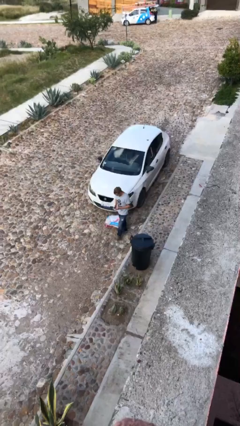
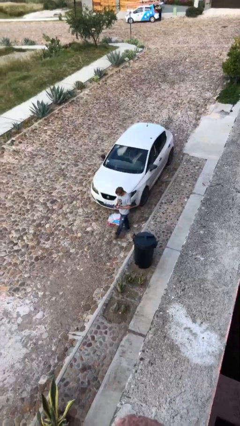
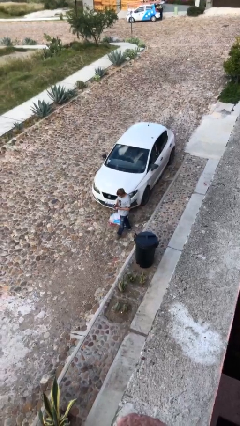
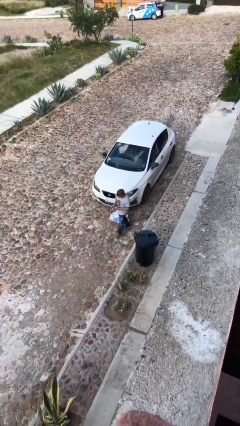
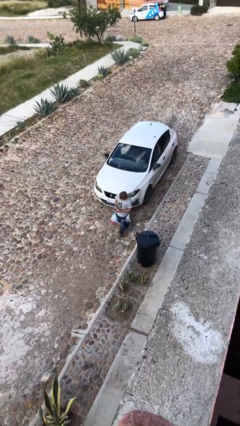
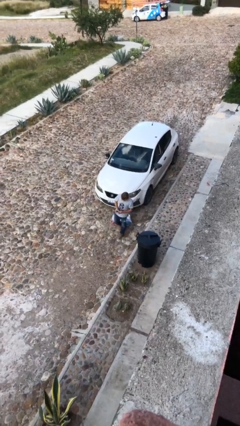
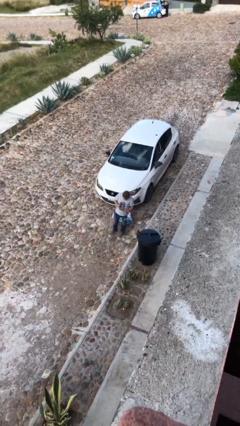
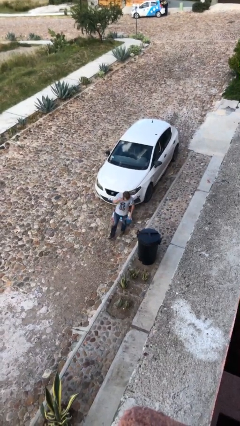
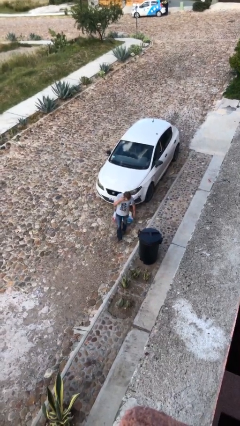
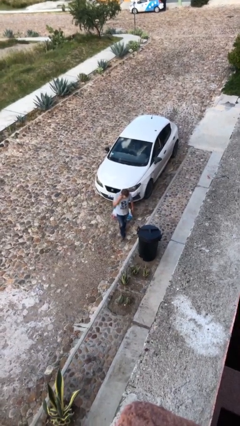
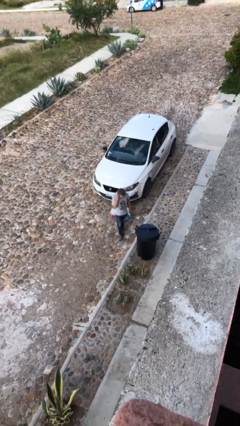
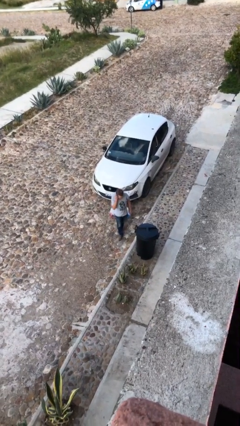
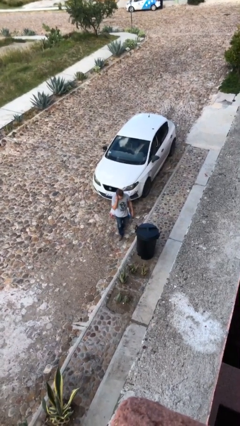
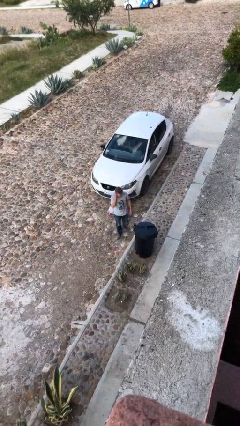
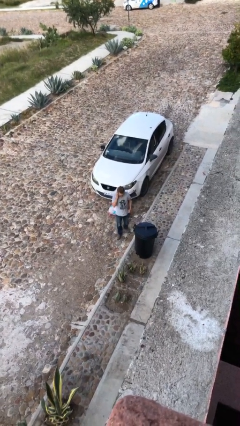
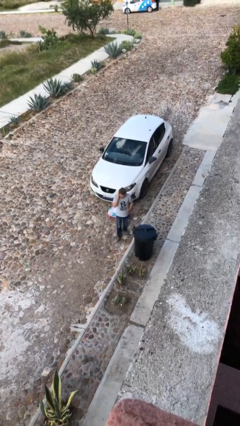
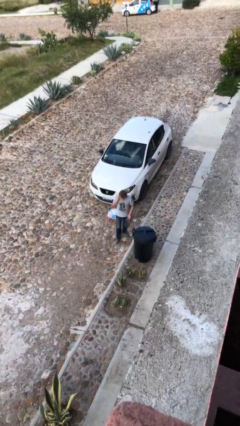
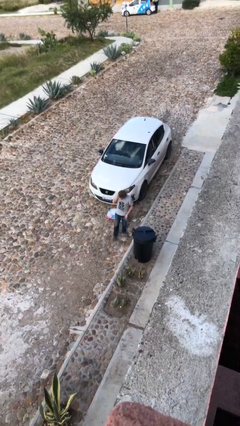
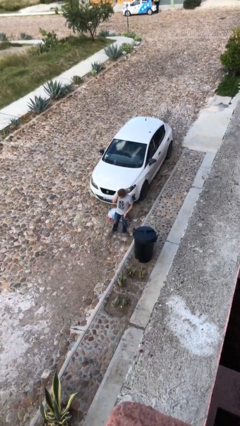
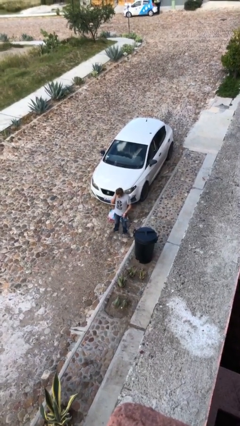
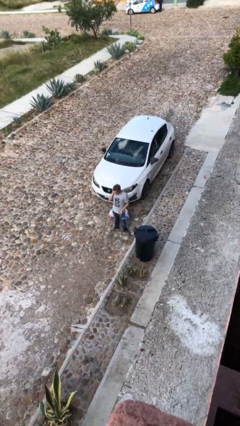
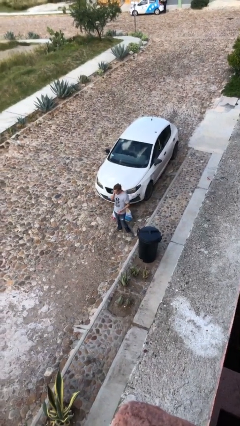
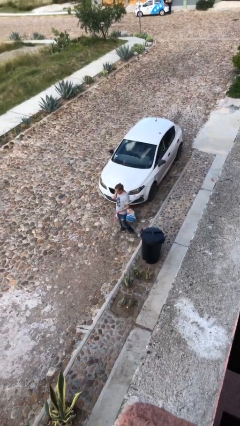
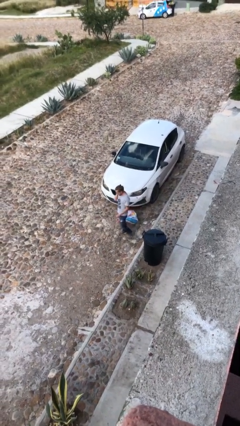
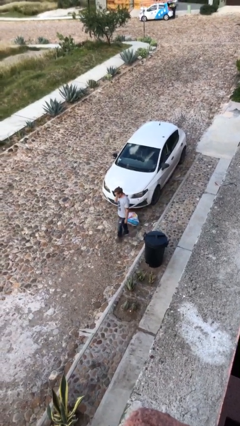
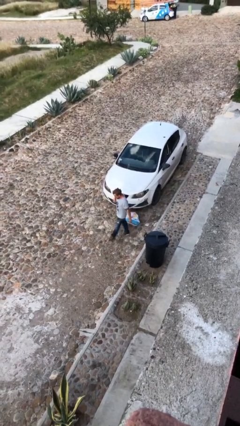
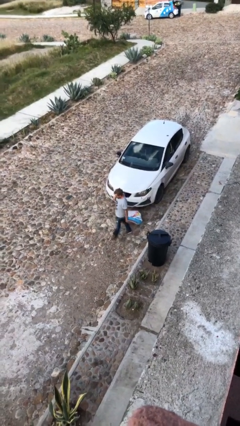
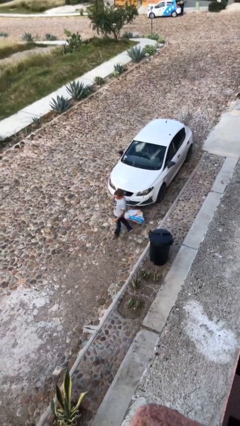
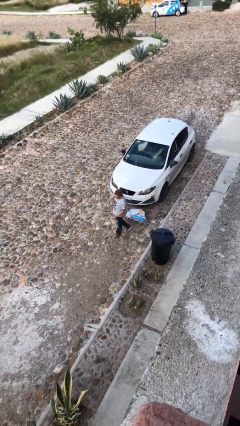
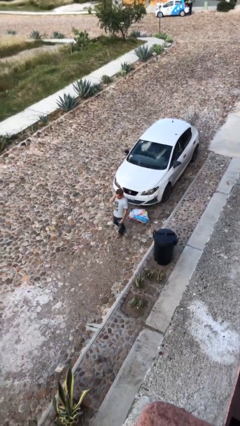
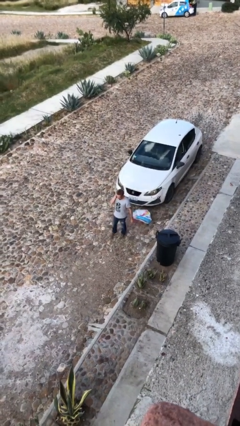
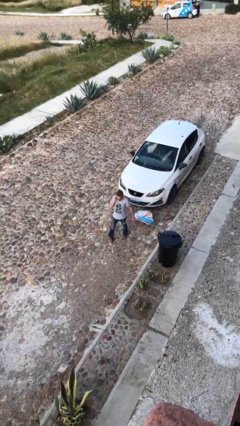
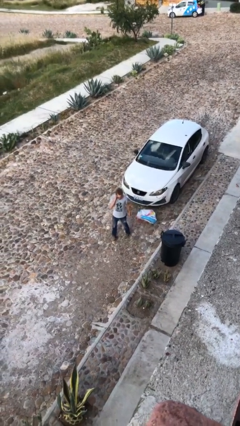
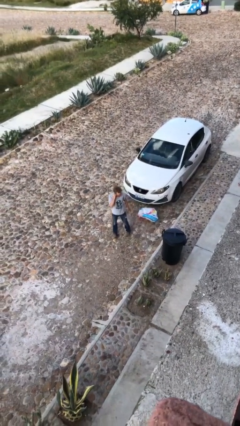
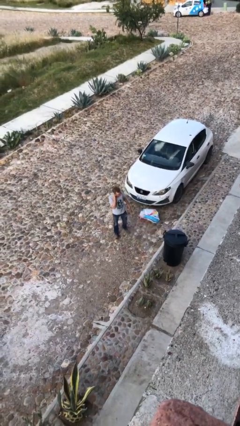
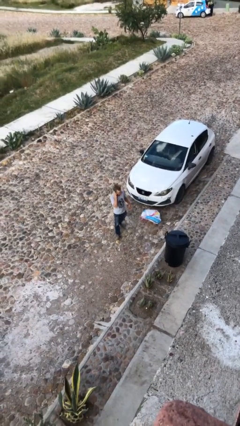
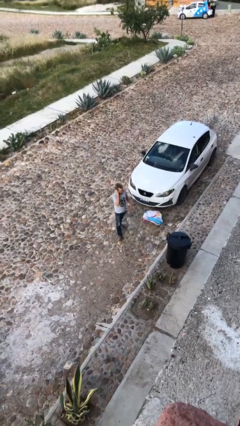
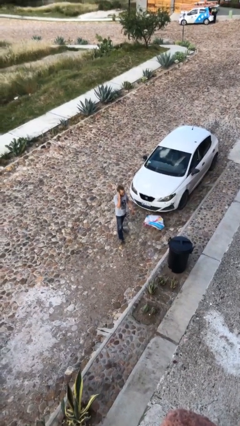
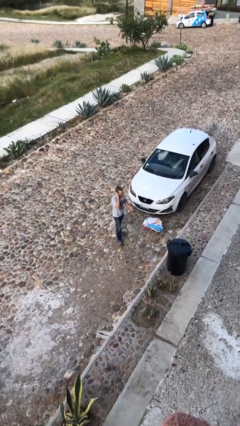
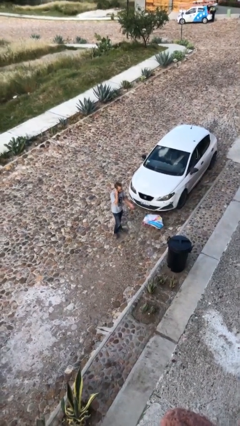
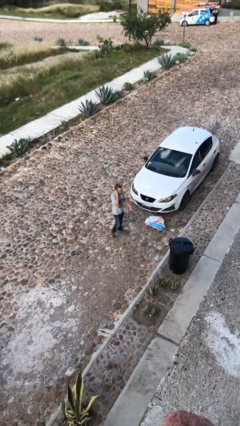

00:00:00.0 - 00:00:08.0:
person talks on phone

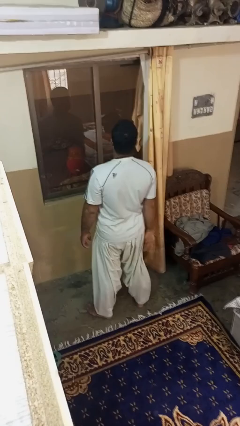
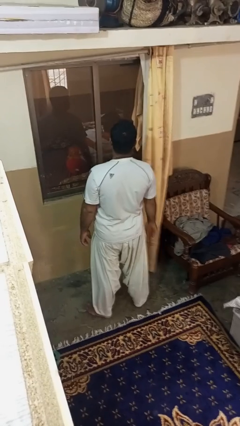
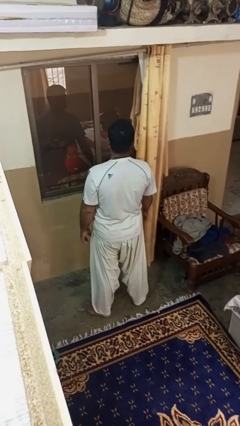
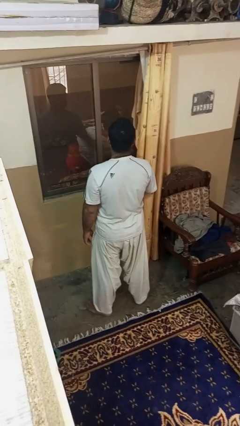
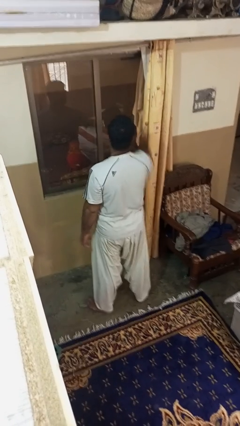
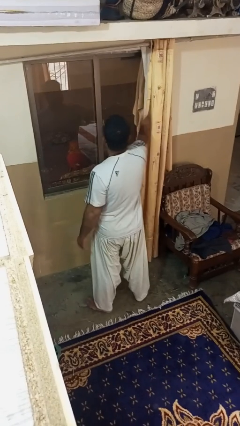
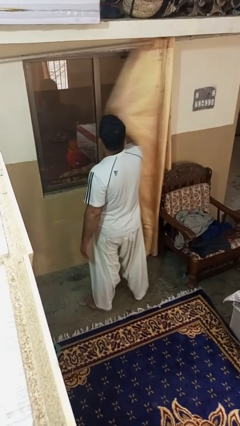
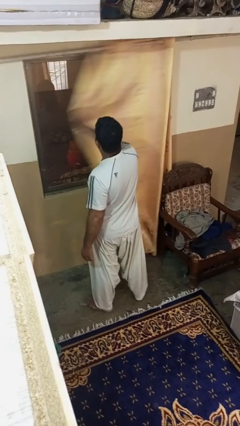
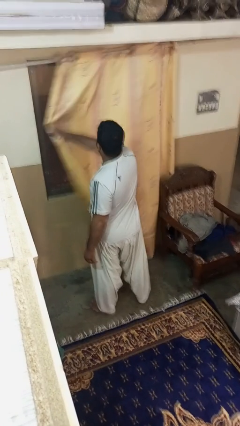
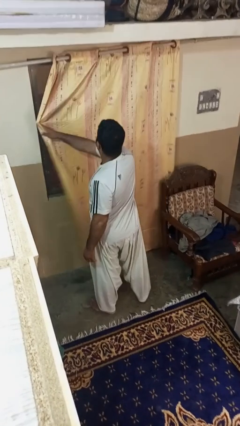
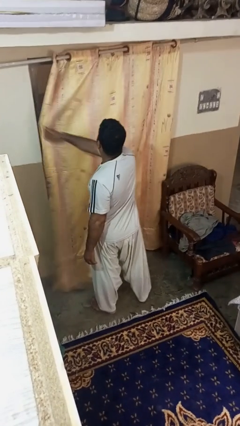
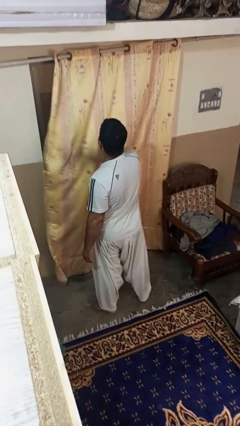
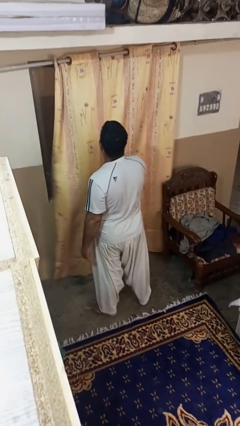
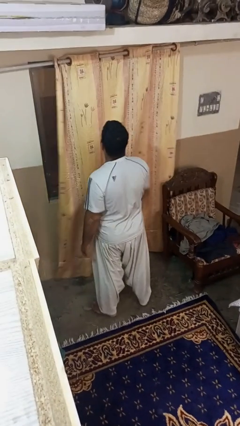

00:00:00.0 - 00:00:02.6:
person closes curtains

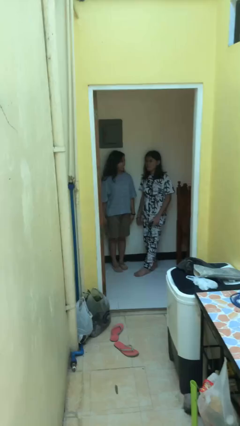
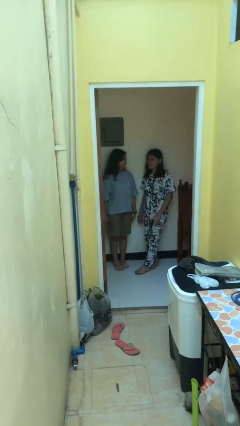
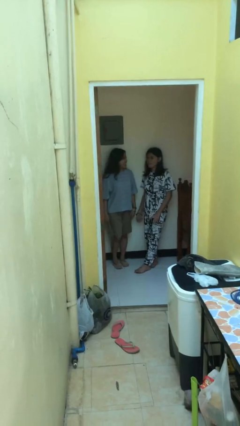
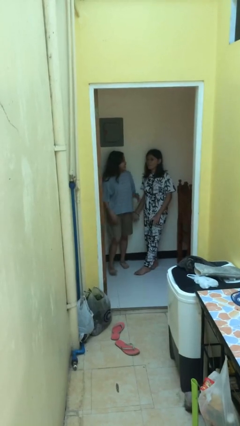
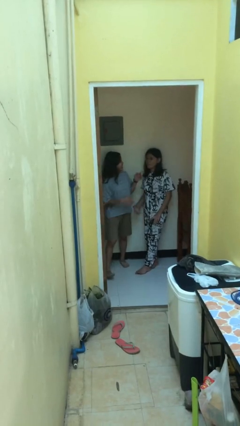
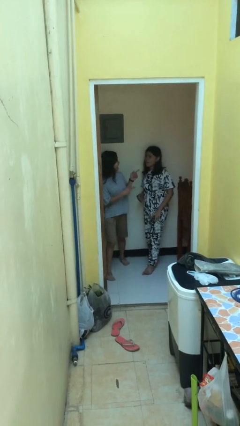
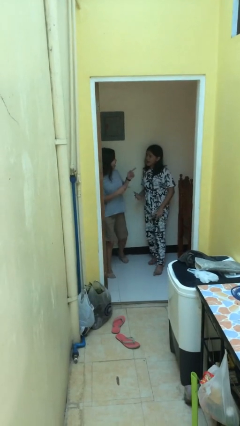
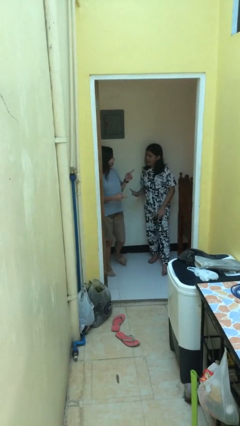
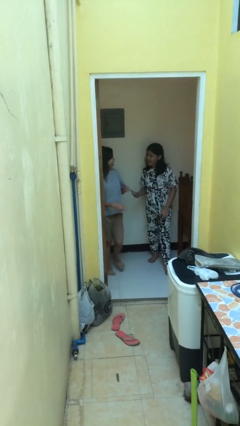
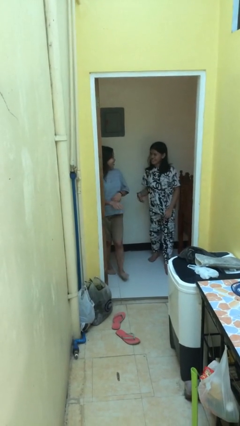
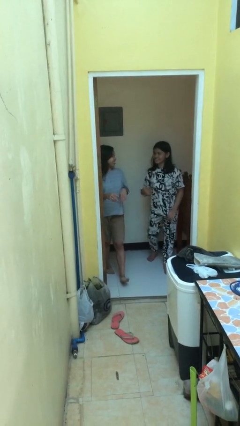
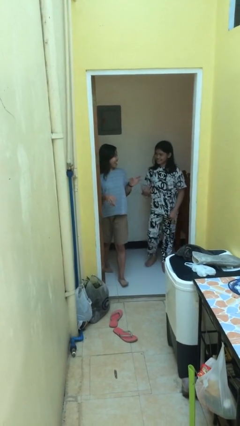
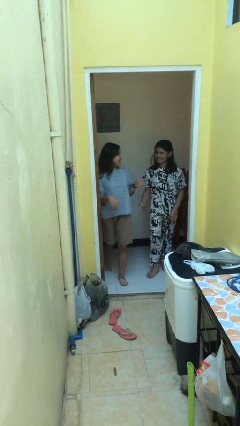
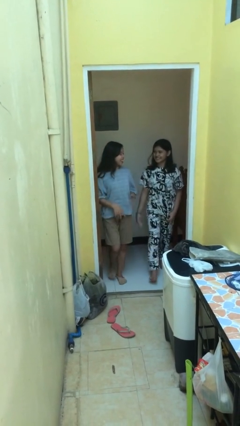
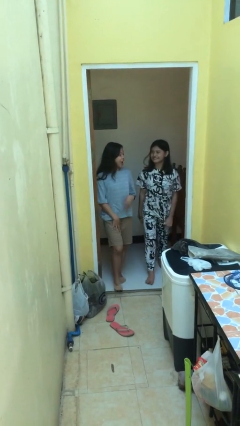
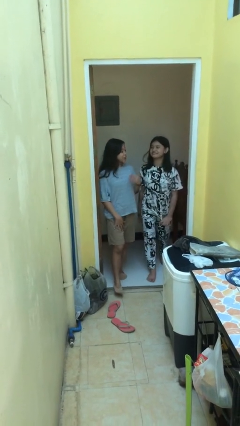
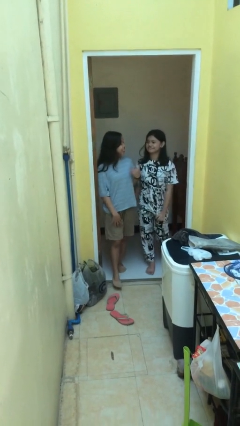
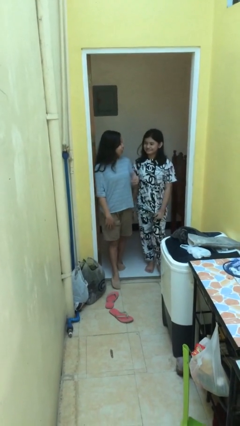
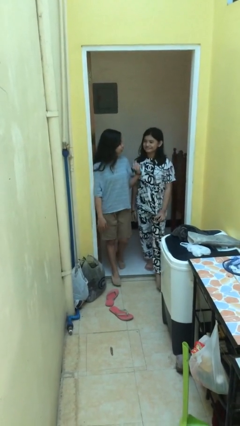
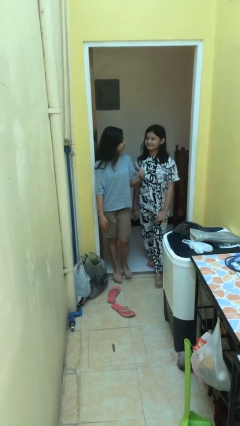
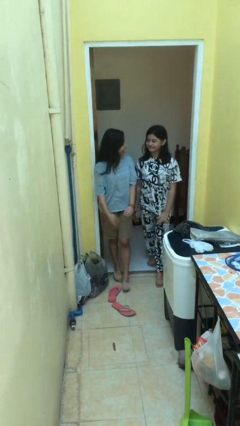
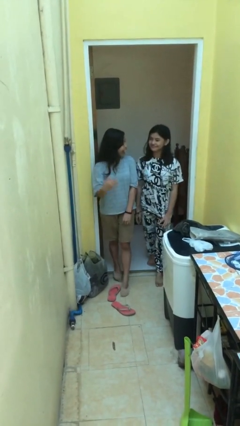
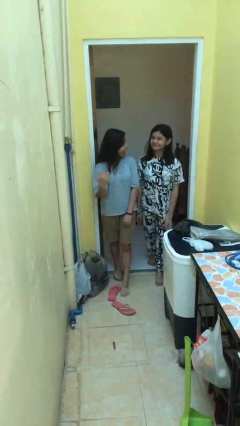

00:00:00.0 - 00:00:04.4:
person talks to person

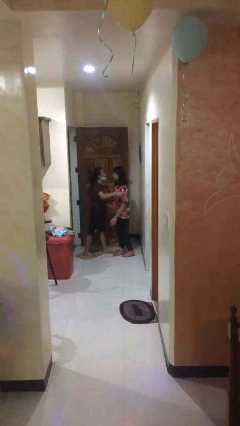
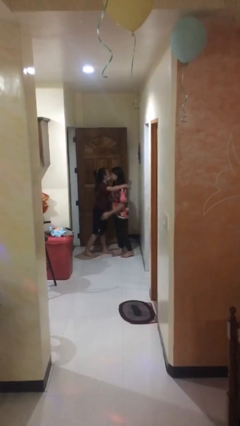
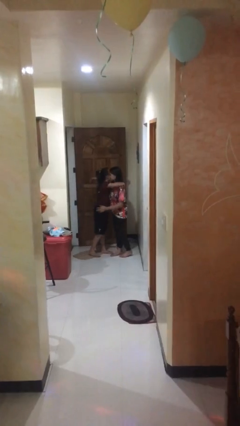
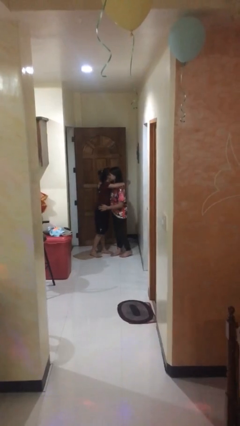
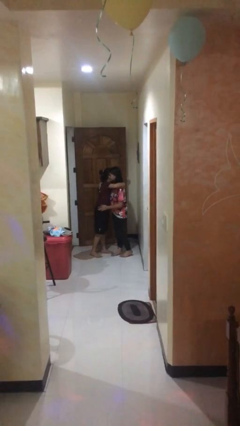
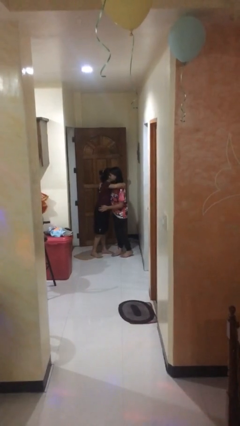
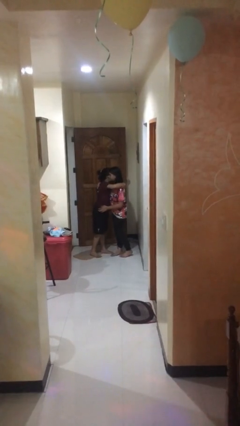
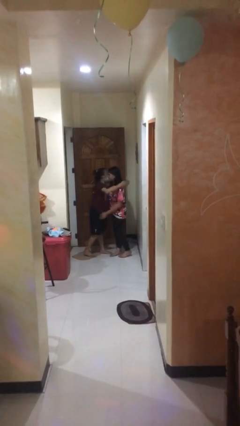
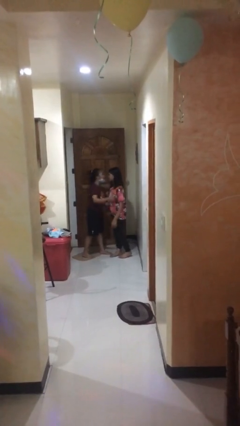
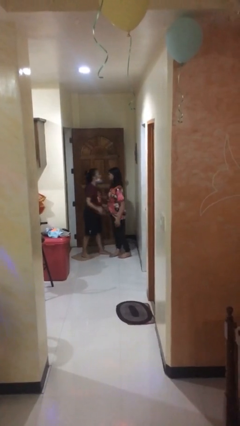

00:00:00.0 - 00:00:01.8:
person embraces person

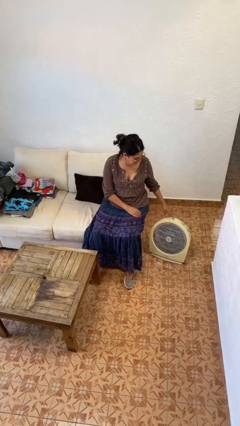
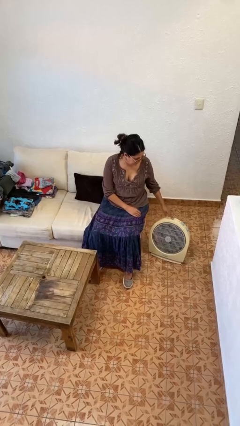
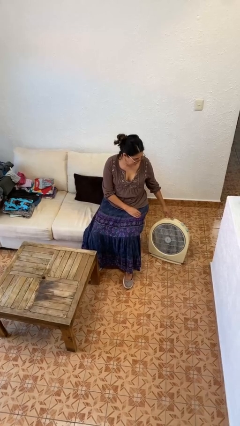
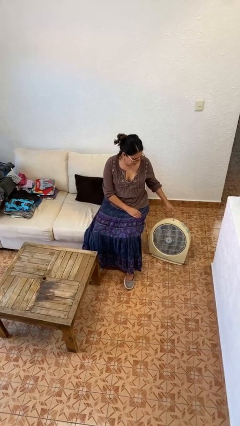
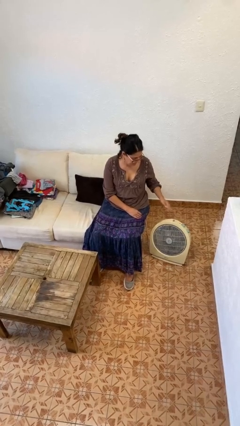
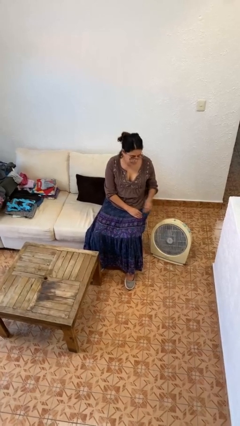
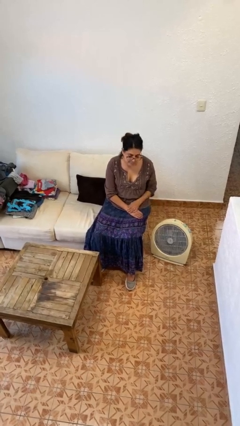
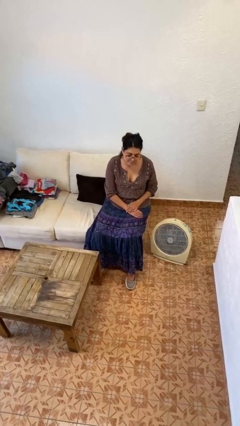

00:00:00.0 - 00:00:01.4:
person turns off fan
